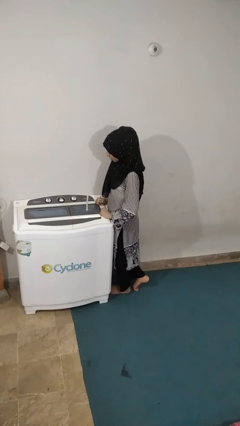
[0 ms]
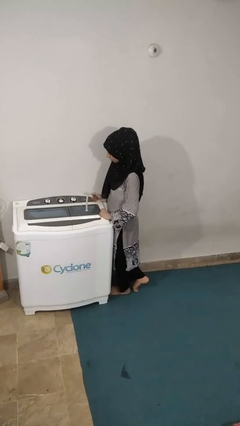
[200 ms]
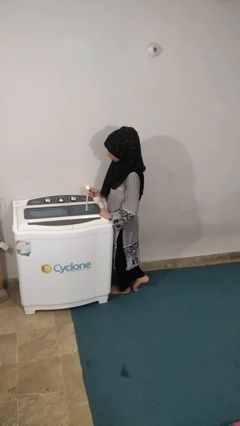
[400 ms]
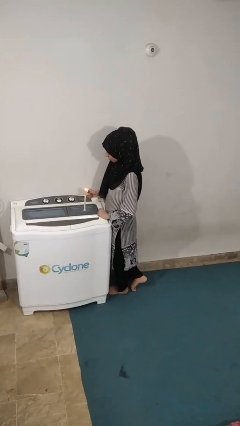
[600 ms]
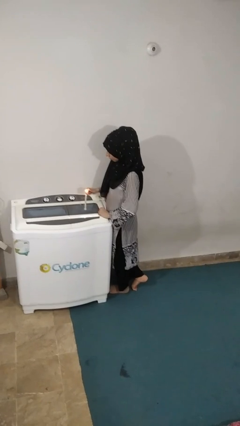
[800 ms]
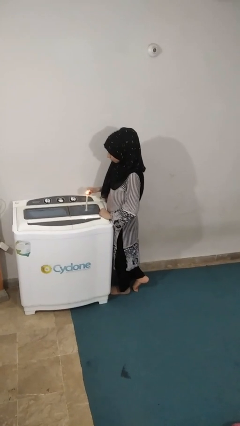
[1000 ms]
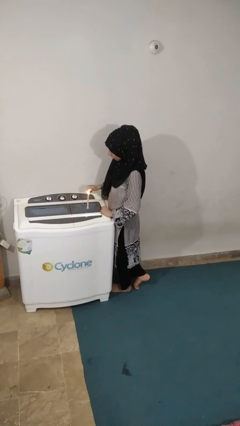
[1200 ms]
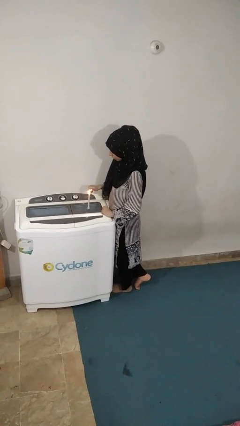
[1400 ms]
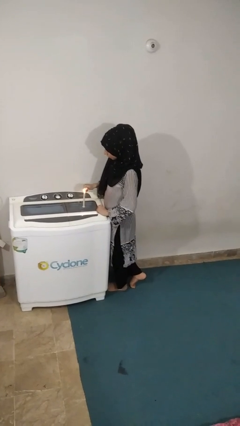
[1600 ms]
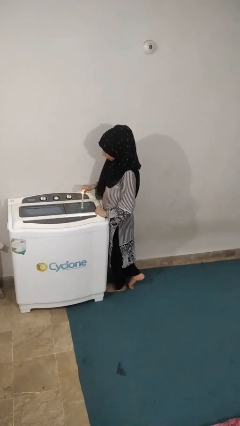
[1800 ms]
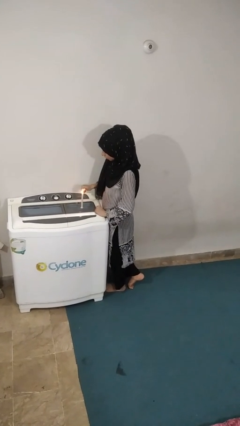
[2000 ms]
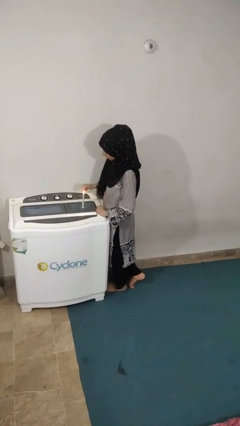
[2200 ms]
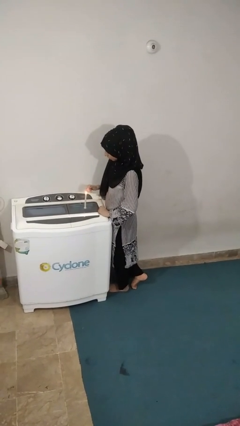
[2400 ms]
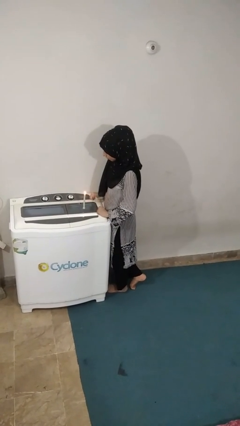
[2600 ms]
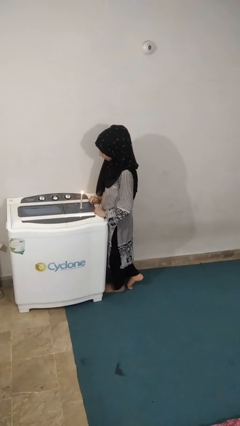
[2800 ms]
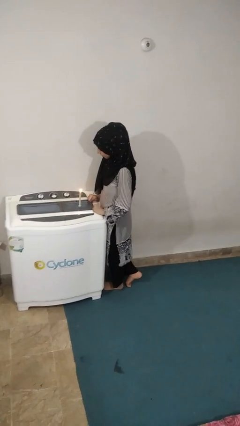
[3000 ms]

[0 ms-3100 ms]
person lights candle

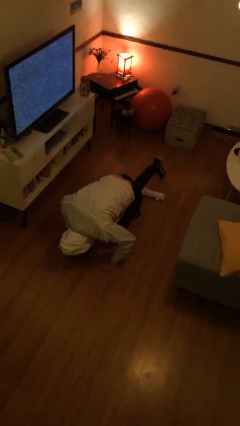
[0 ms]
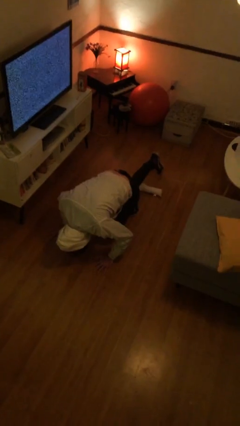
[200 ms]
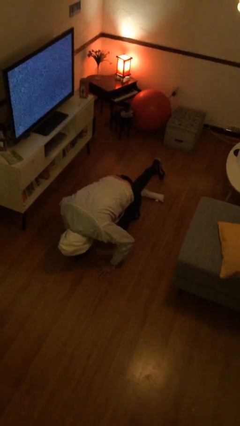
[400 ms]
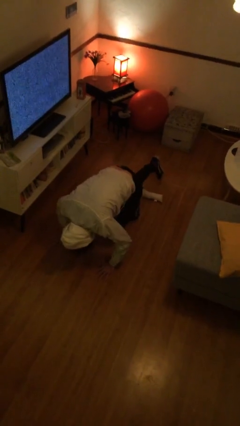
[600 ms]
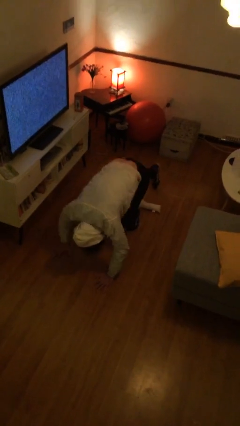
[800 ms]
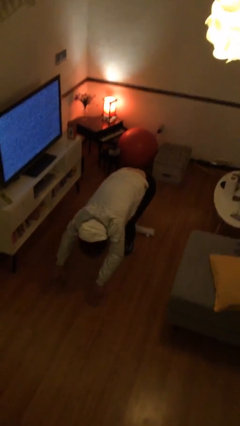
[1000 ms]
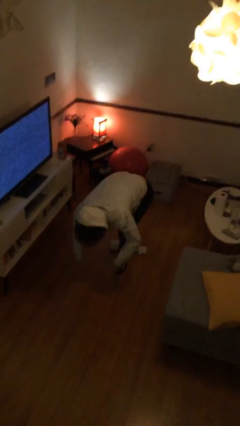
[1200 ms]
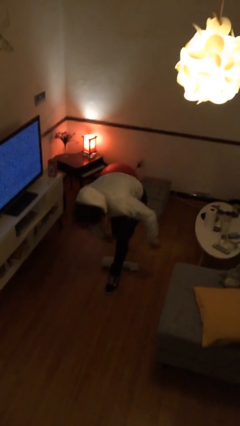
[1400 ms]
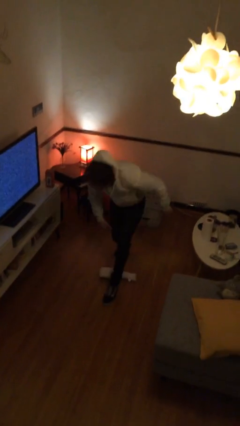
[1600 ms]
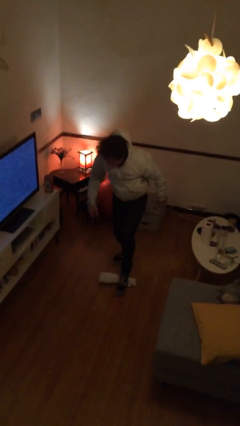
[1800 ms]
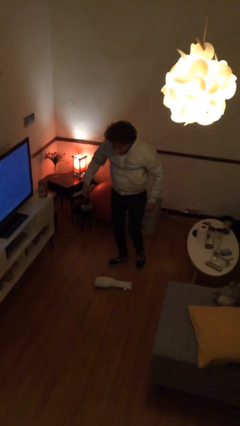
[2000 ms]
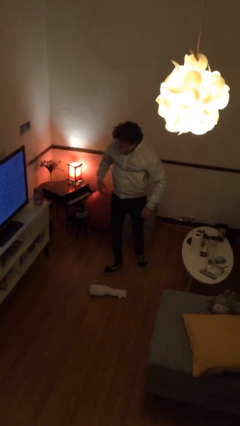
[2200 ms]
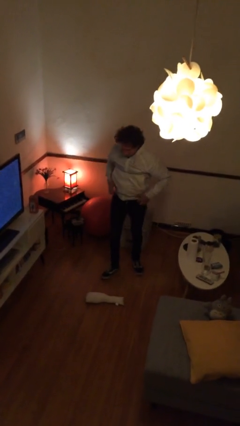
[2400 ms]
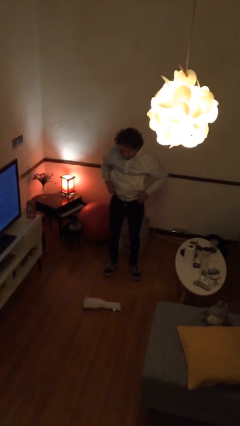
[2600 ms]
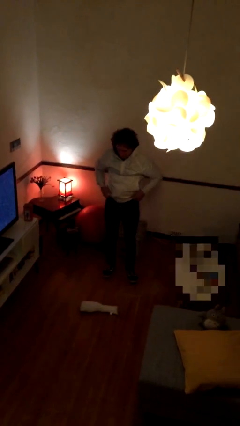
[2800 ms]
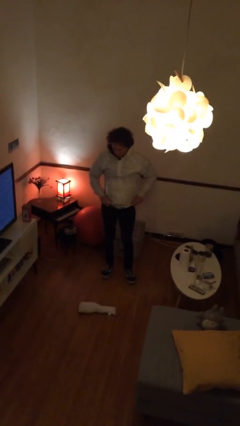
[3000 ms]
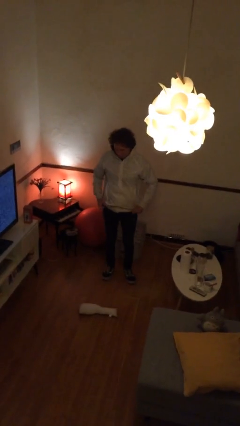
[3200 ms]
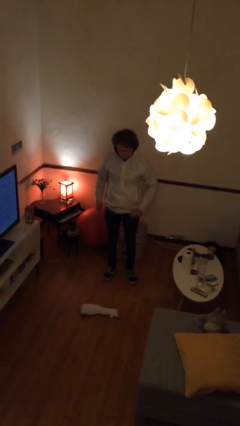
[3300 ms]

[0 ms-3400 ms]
person stands up from floor

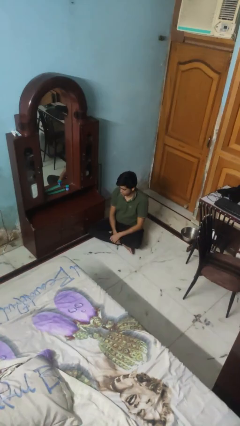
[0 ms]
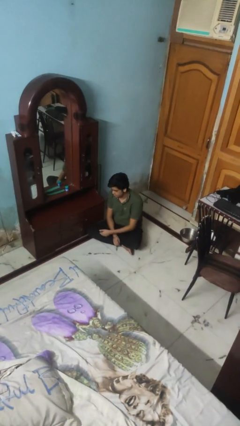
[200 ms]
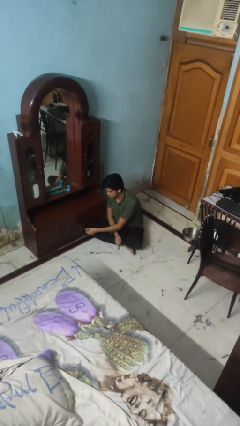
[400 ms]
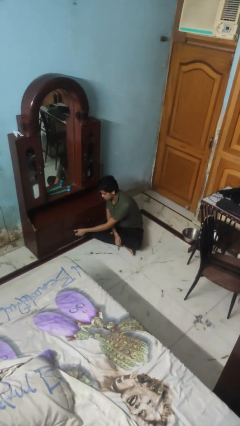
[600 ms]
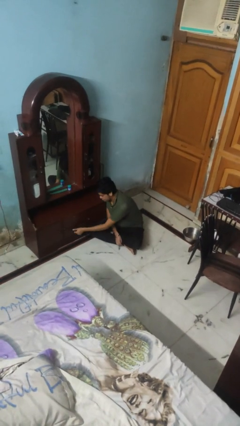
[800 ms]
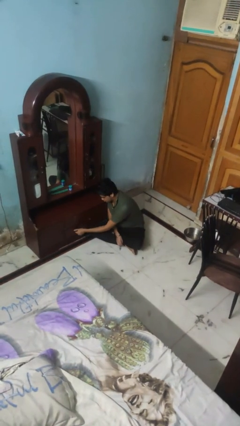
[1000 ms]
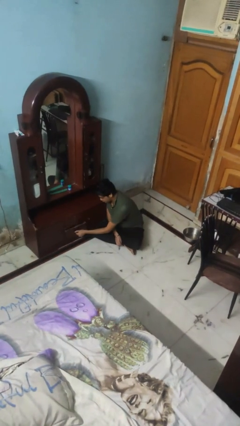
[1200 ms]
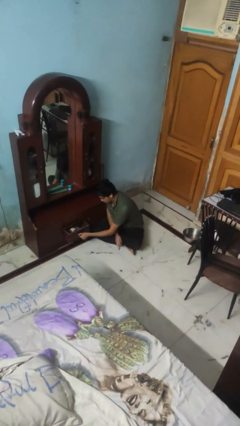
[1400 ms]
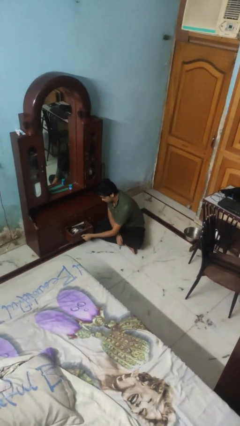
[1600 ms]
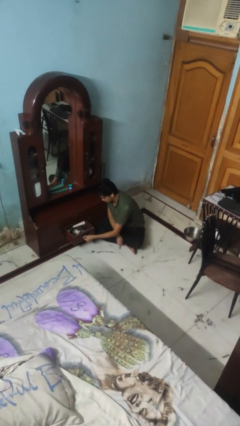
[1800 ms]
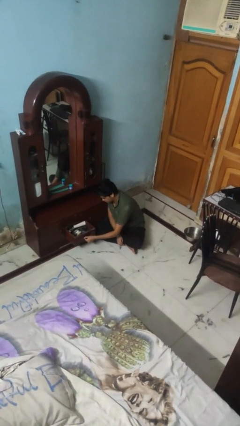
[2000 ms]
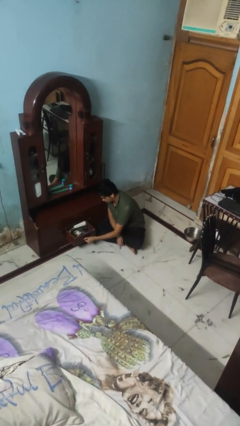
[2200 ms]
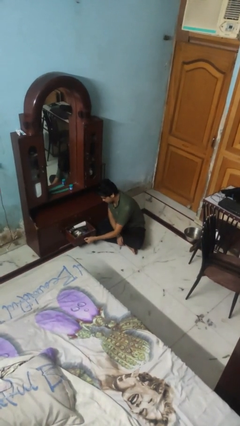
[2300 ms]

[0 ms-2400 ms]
person opens dresser drawer

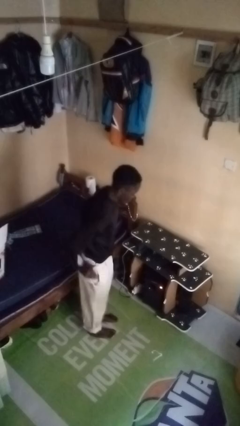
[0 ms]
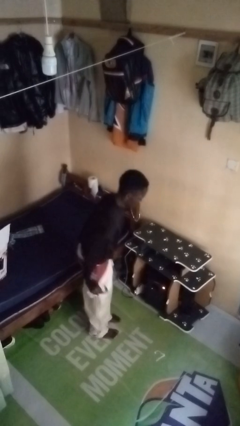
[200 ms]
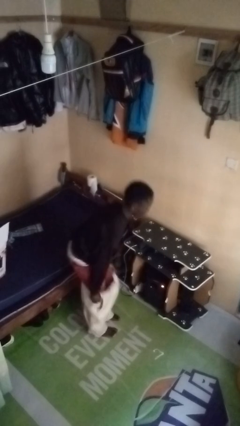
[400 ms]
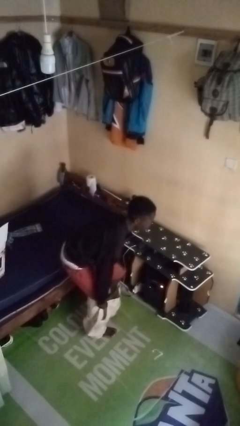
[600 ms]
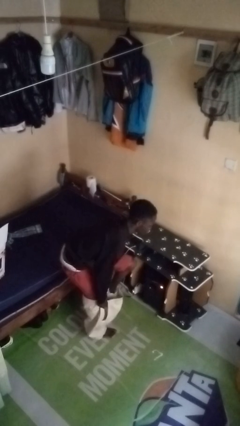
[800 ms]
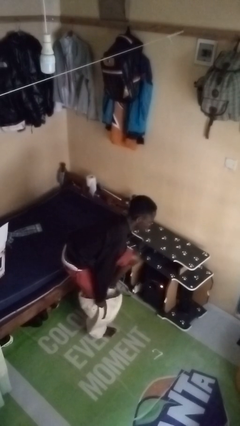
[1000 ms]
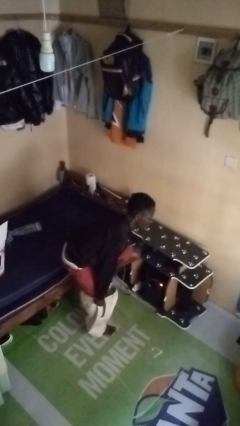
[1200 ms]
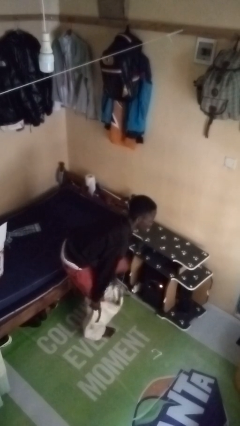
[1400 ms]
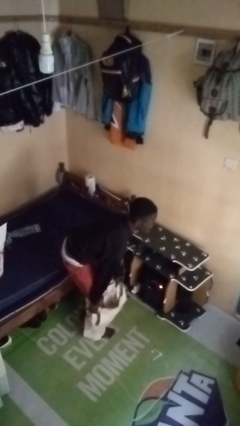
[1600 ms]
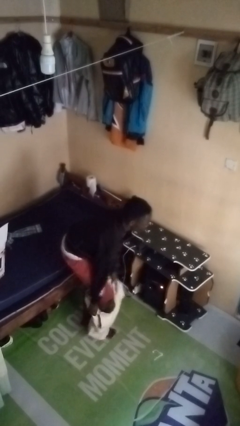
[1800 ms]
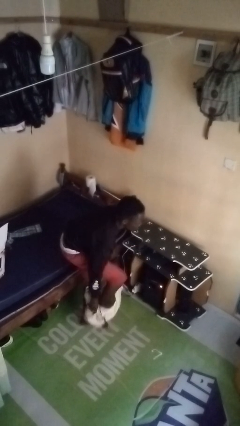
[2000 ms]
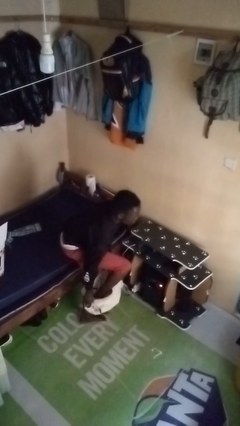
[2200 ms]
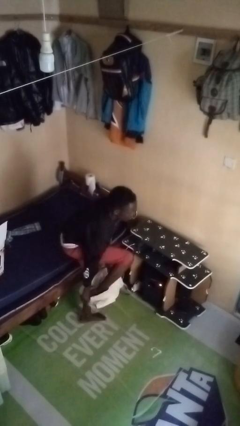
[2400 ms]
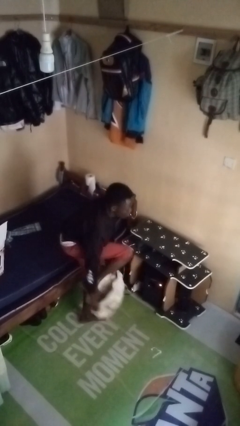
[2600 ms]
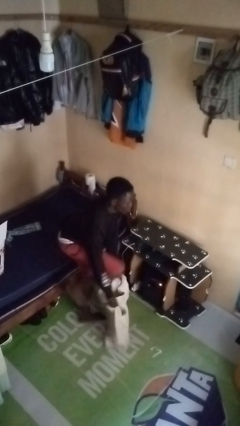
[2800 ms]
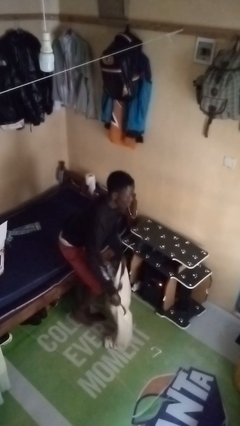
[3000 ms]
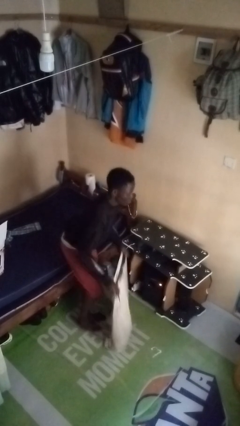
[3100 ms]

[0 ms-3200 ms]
person takes off pants

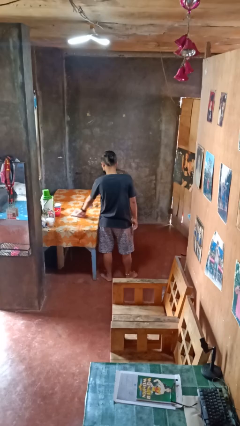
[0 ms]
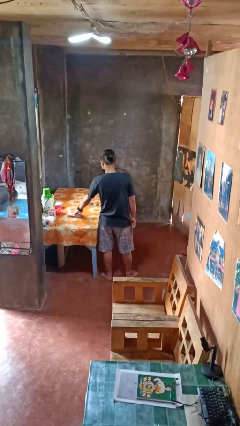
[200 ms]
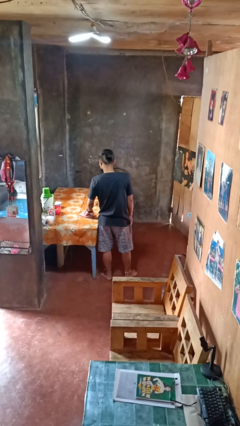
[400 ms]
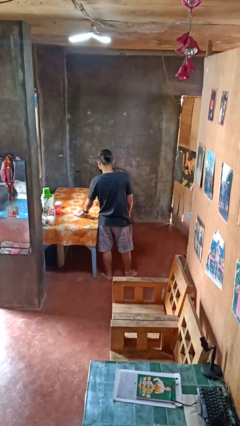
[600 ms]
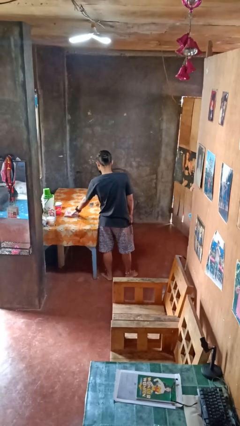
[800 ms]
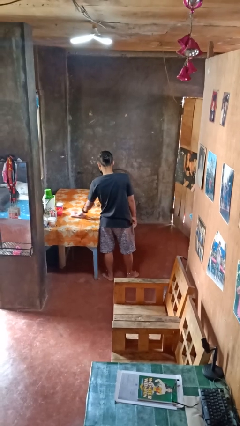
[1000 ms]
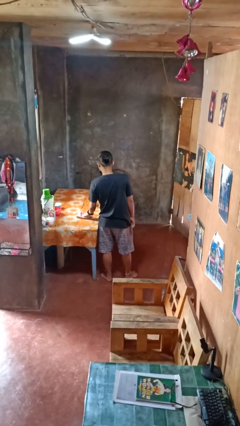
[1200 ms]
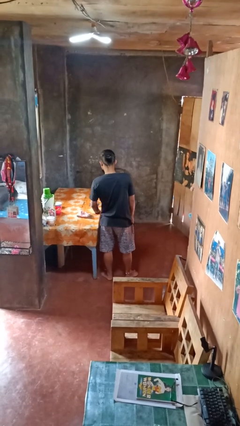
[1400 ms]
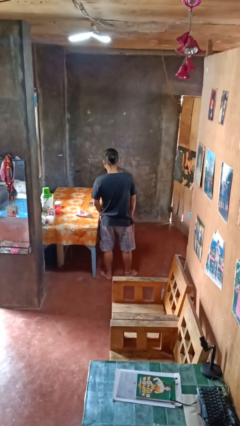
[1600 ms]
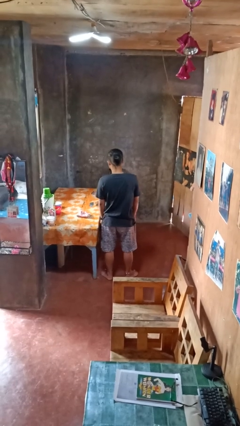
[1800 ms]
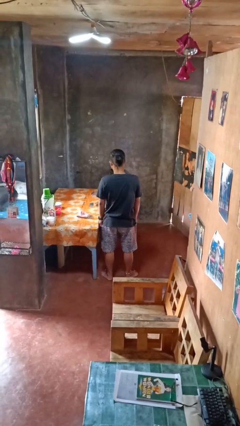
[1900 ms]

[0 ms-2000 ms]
person cleans table with rag

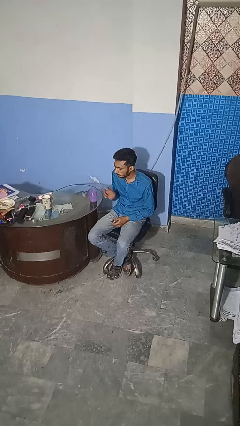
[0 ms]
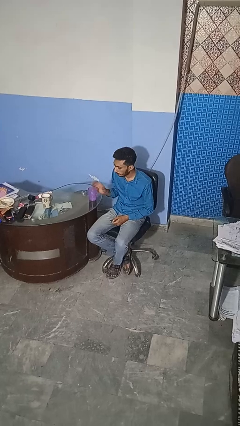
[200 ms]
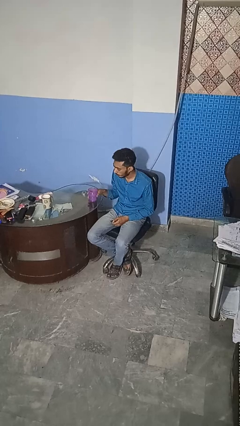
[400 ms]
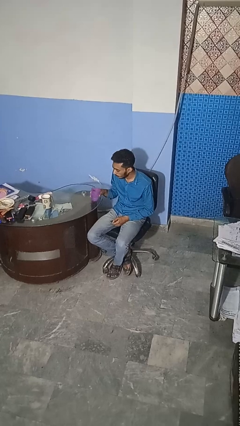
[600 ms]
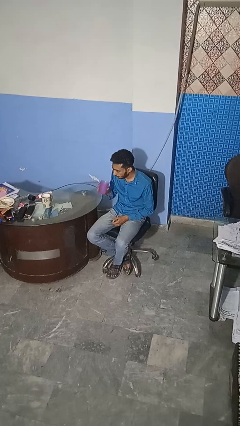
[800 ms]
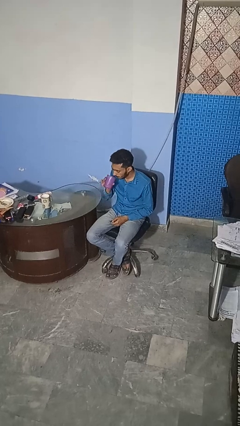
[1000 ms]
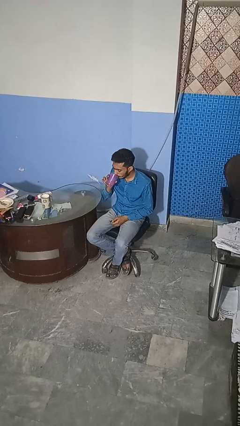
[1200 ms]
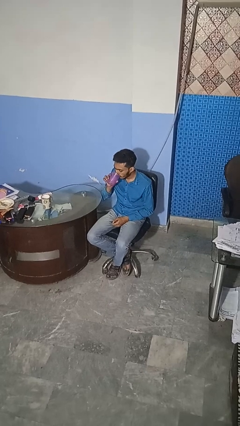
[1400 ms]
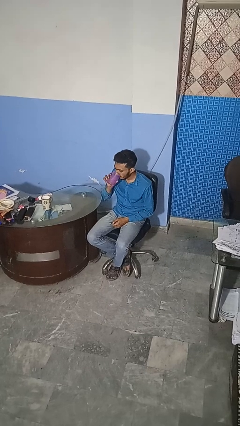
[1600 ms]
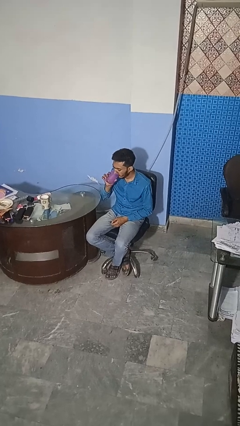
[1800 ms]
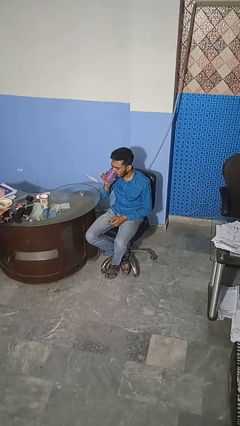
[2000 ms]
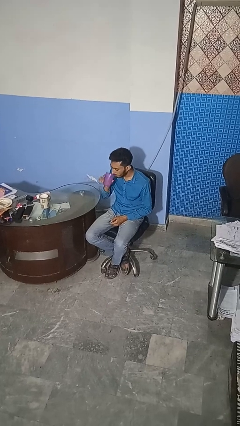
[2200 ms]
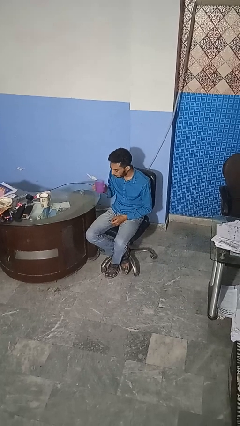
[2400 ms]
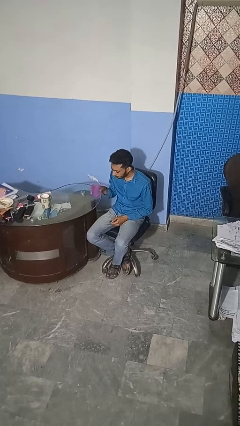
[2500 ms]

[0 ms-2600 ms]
person drinks from cup

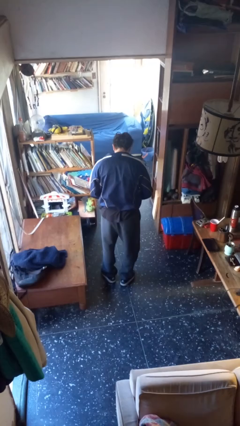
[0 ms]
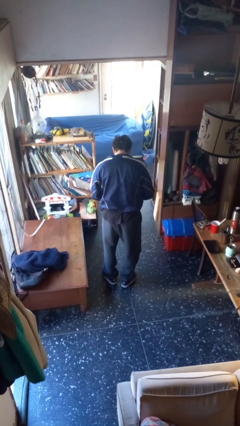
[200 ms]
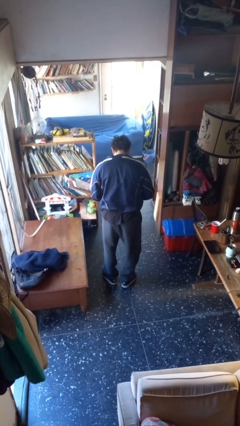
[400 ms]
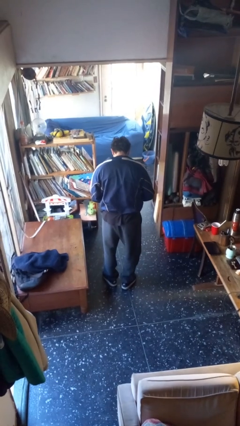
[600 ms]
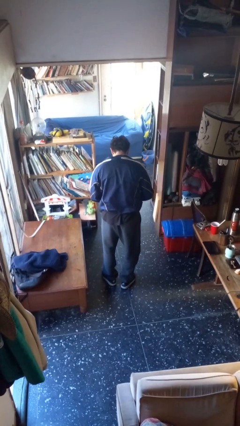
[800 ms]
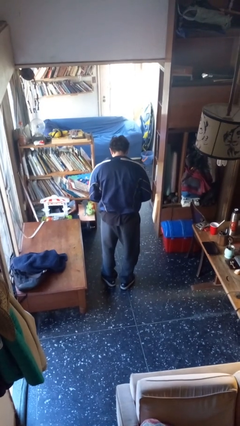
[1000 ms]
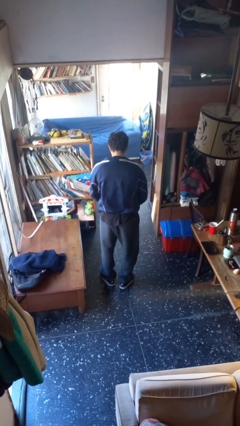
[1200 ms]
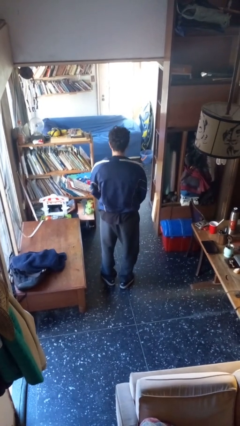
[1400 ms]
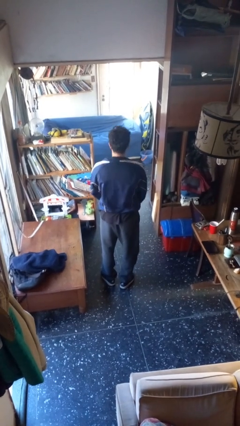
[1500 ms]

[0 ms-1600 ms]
person zips up jacket
